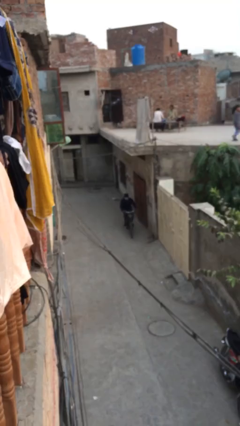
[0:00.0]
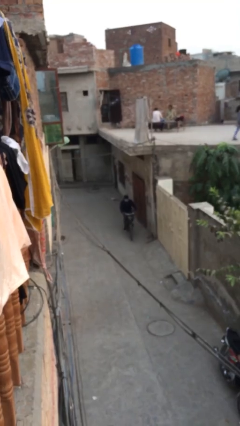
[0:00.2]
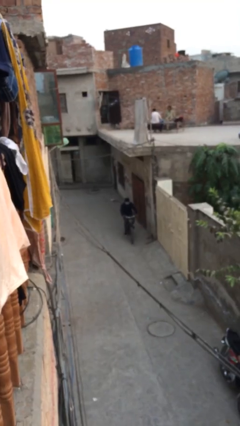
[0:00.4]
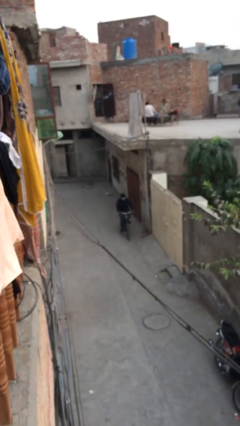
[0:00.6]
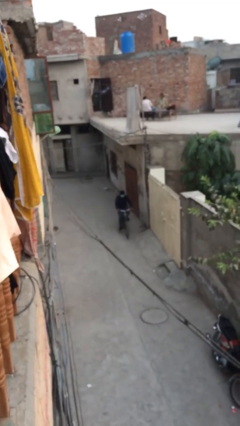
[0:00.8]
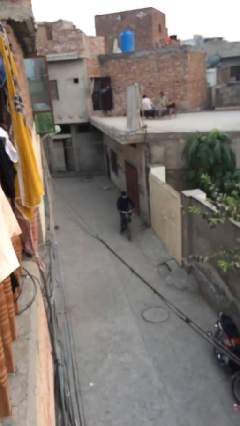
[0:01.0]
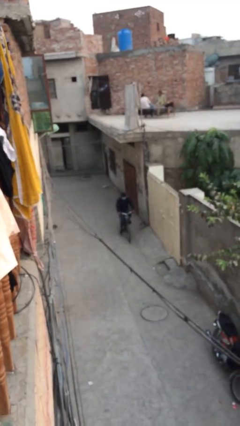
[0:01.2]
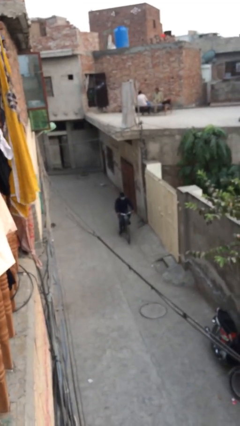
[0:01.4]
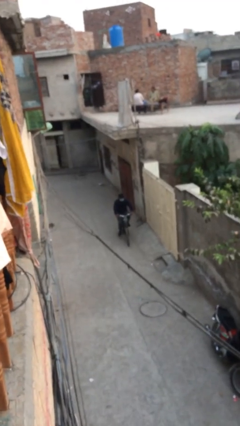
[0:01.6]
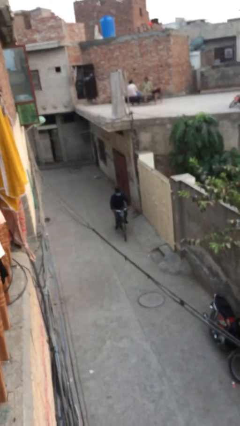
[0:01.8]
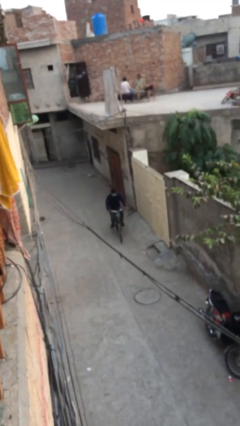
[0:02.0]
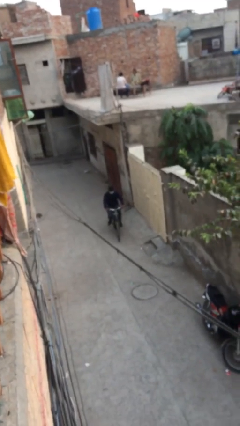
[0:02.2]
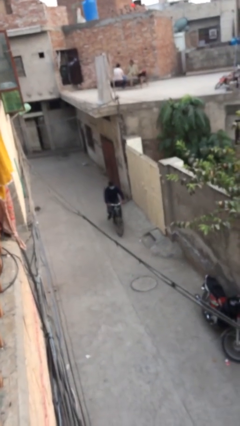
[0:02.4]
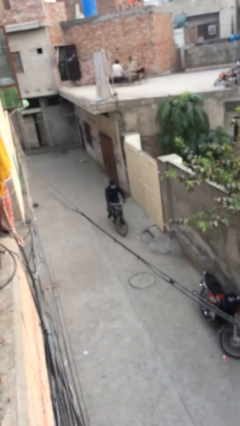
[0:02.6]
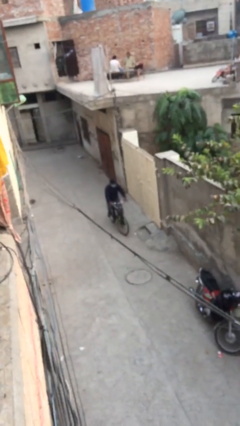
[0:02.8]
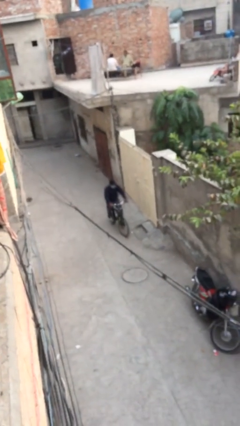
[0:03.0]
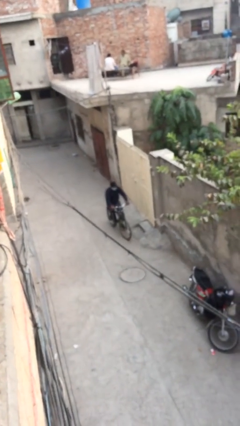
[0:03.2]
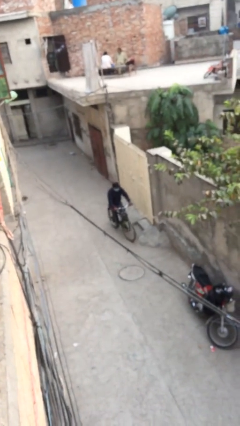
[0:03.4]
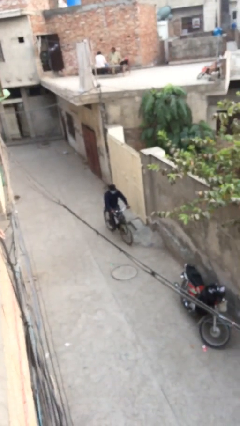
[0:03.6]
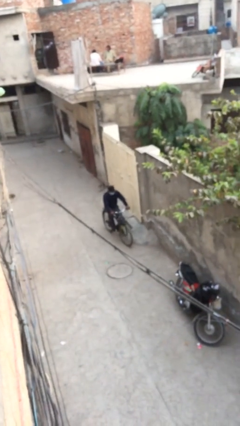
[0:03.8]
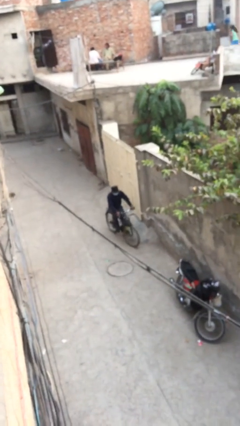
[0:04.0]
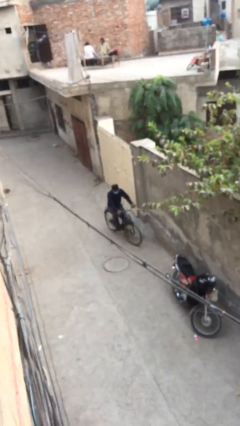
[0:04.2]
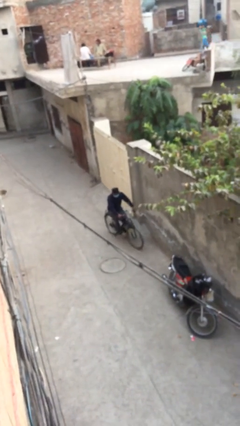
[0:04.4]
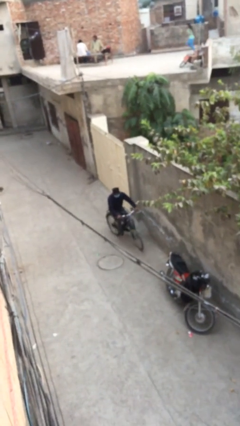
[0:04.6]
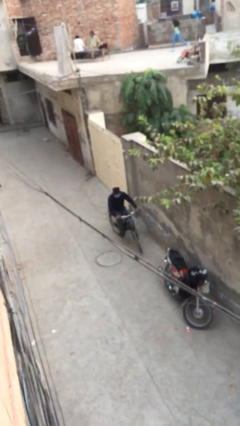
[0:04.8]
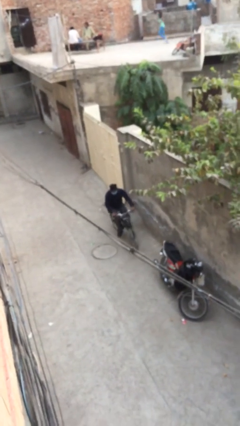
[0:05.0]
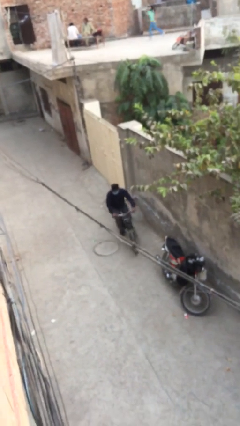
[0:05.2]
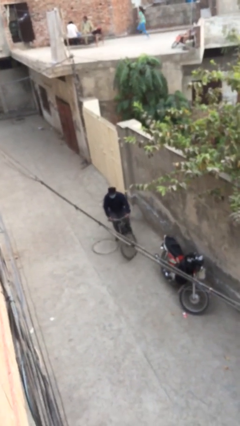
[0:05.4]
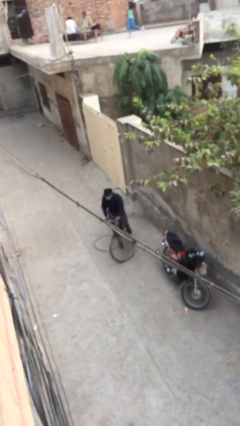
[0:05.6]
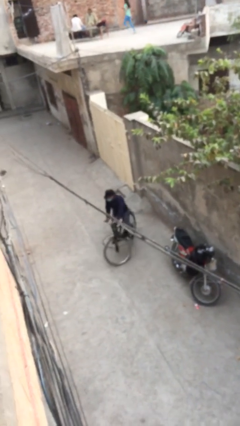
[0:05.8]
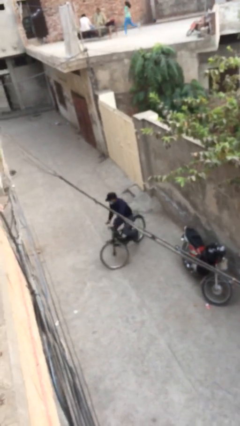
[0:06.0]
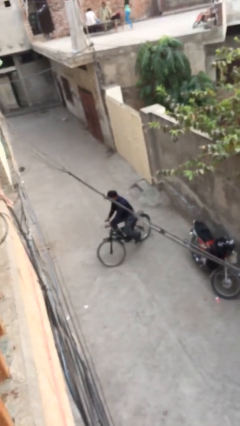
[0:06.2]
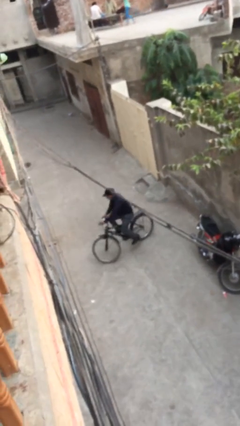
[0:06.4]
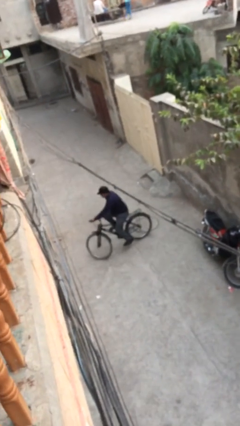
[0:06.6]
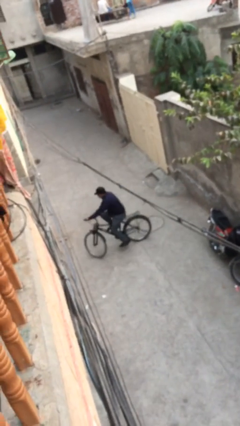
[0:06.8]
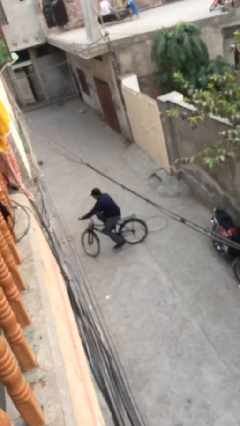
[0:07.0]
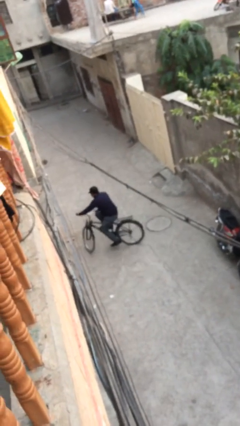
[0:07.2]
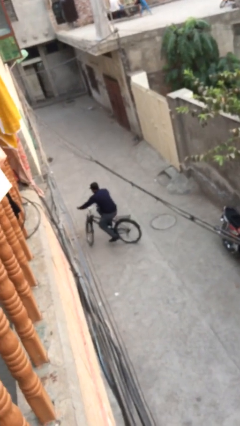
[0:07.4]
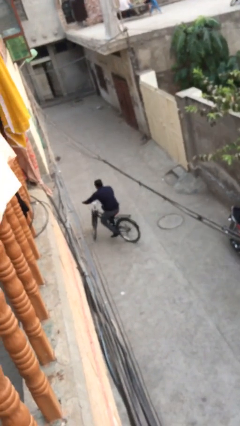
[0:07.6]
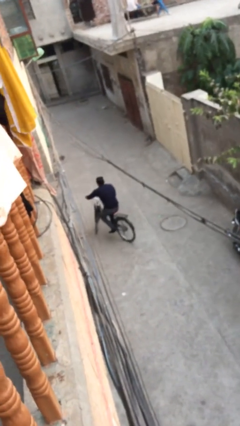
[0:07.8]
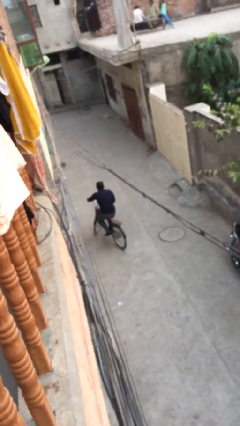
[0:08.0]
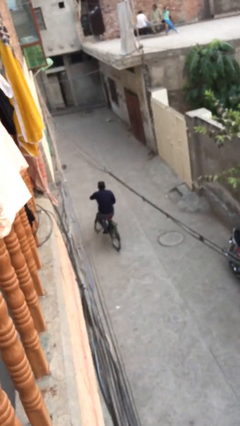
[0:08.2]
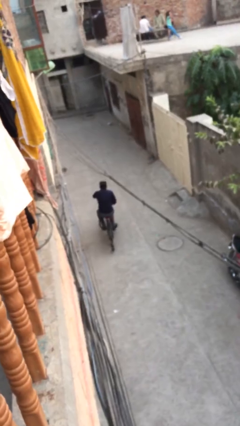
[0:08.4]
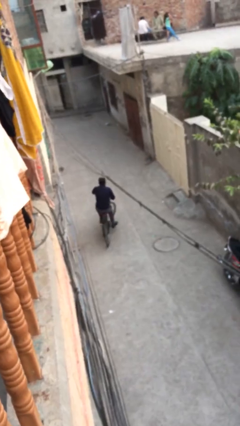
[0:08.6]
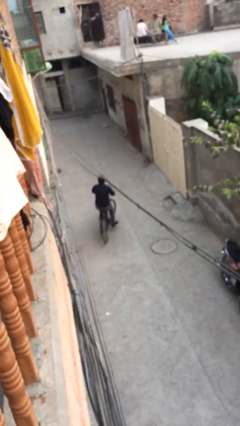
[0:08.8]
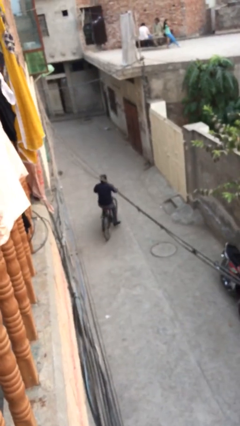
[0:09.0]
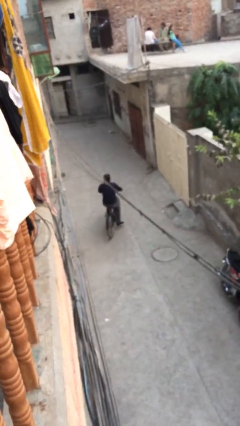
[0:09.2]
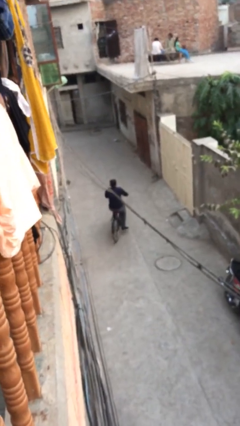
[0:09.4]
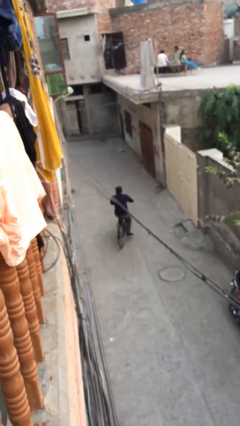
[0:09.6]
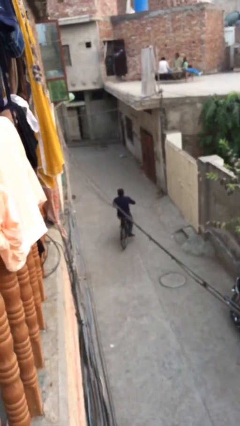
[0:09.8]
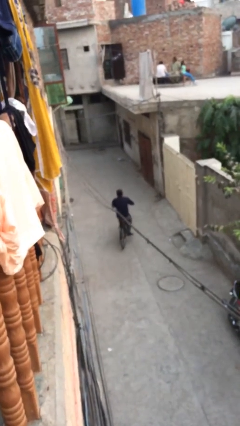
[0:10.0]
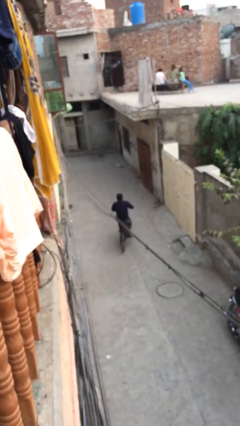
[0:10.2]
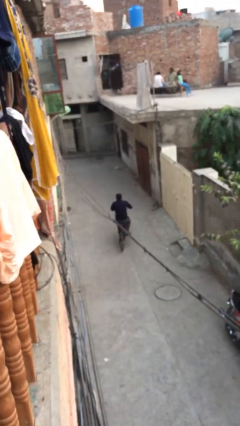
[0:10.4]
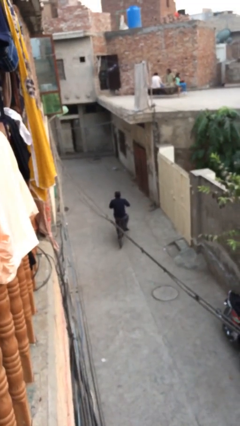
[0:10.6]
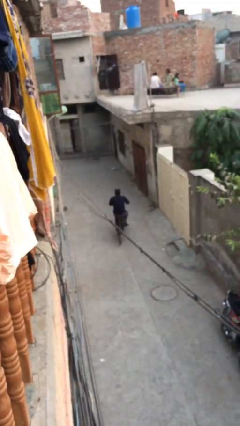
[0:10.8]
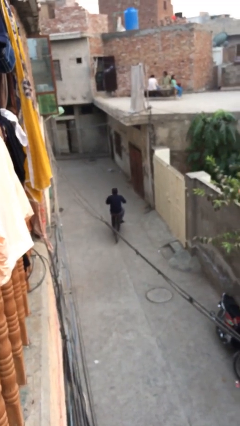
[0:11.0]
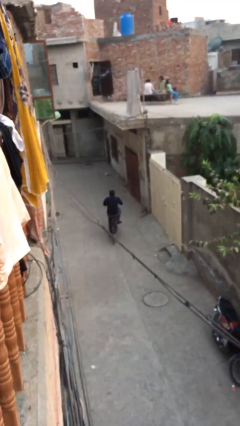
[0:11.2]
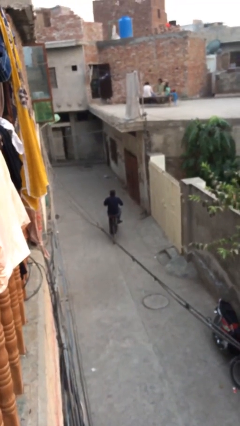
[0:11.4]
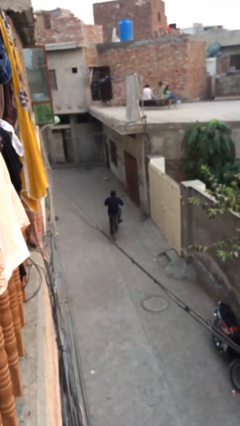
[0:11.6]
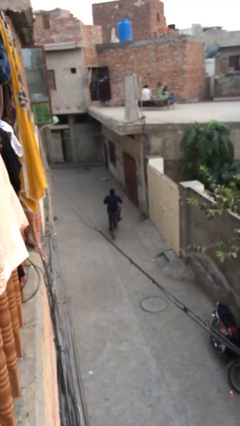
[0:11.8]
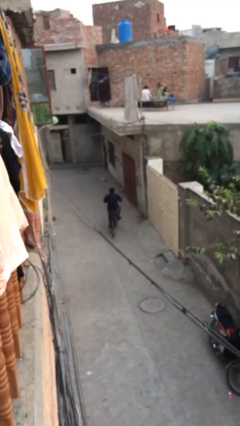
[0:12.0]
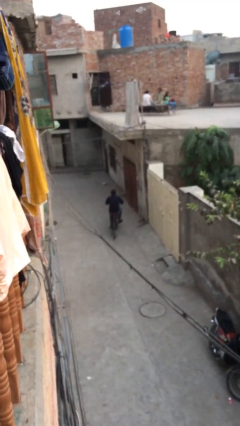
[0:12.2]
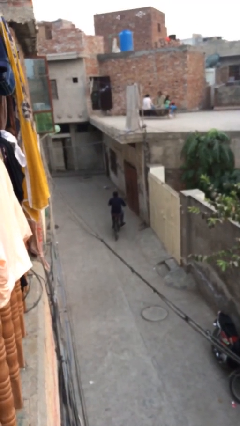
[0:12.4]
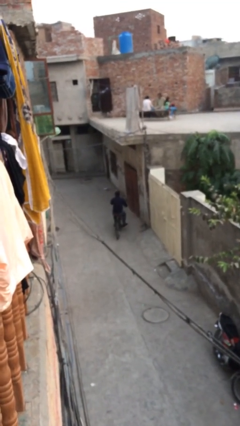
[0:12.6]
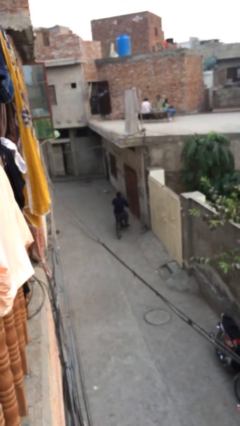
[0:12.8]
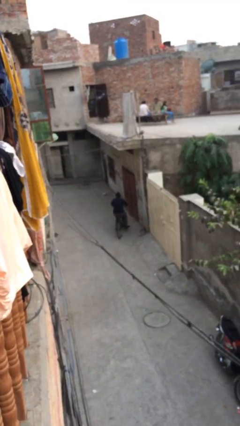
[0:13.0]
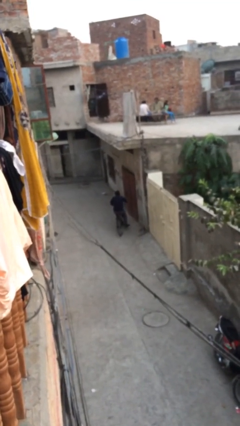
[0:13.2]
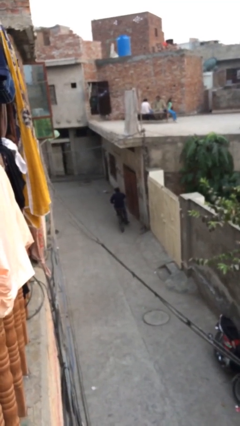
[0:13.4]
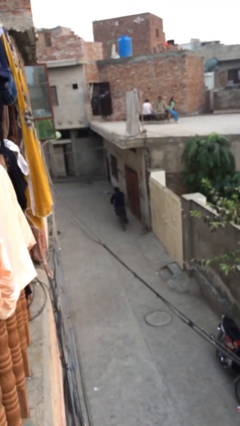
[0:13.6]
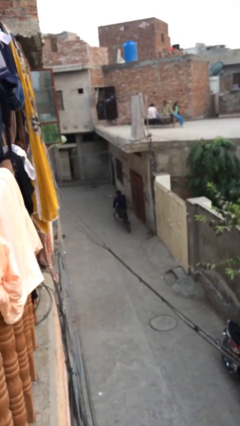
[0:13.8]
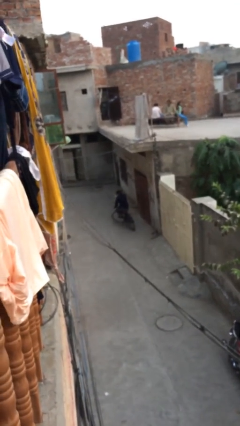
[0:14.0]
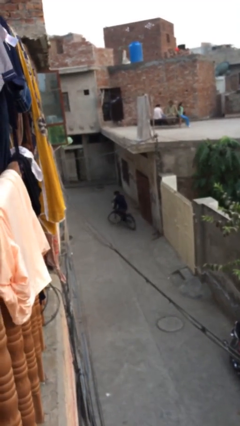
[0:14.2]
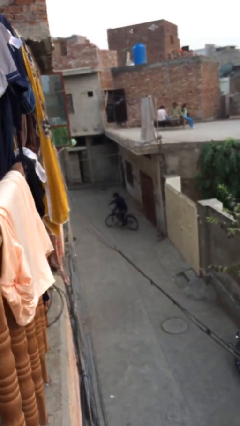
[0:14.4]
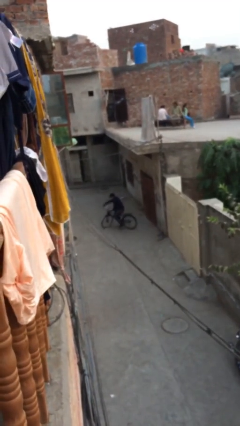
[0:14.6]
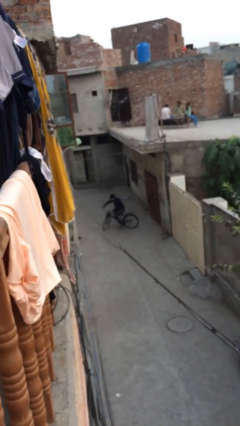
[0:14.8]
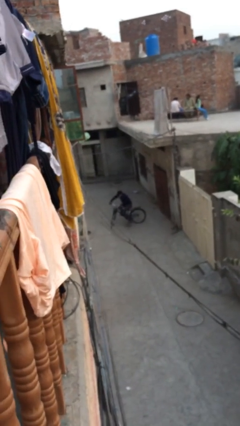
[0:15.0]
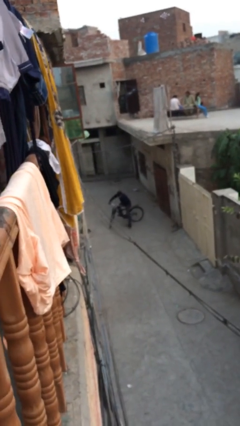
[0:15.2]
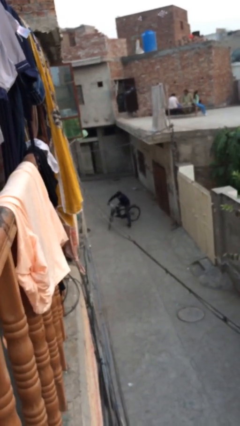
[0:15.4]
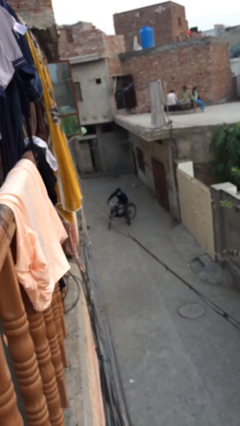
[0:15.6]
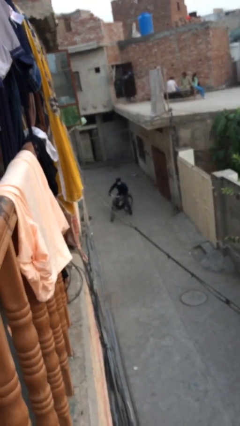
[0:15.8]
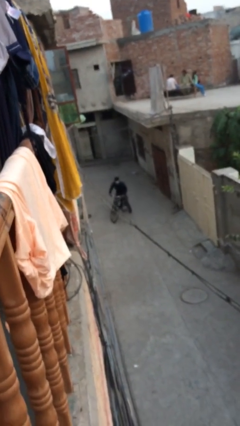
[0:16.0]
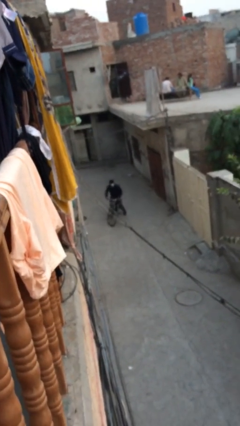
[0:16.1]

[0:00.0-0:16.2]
person rides bicycle

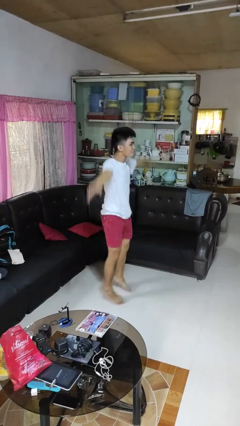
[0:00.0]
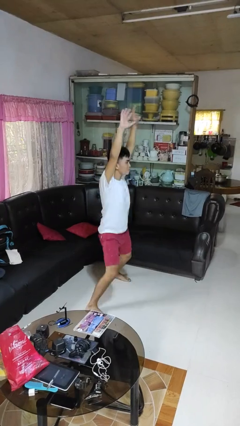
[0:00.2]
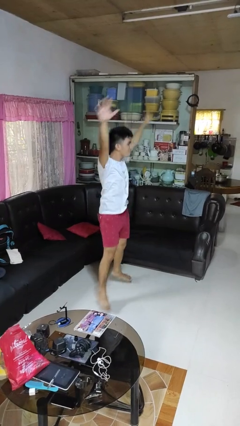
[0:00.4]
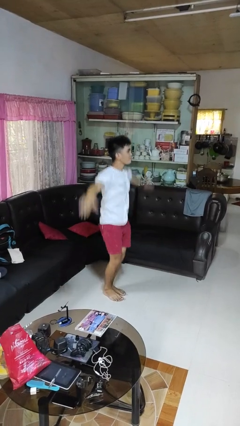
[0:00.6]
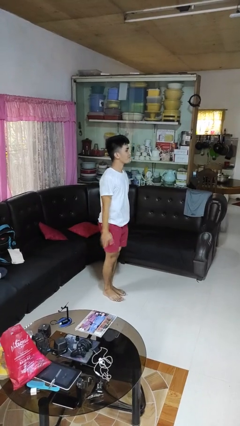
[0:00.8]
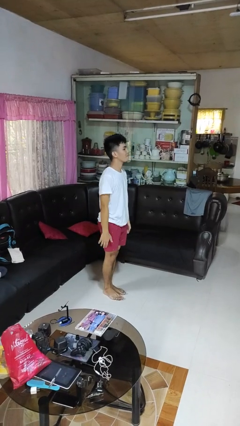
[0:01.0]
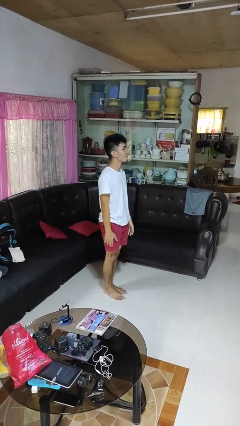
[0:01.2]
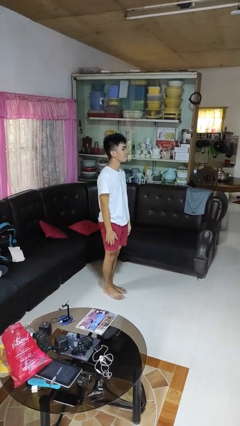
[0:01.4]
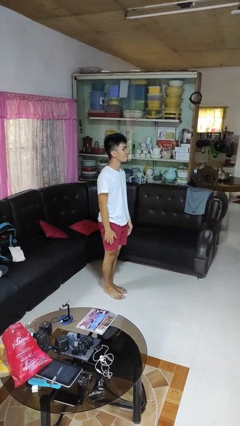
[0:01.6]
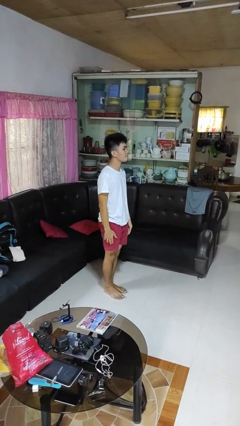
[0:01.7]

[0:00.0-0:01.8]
person exercises with jumping jacks

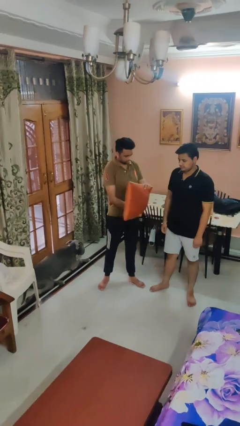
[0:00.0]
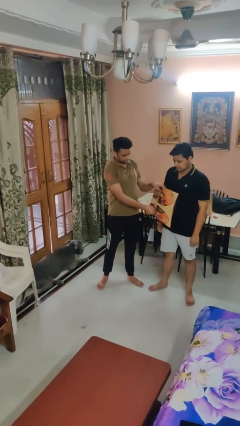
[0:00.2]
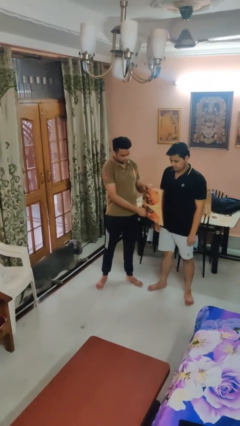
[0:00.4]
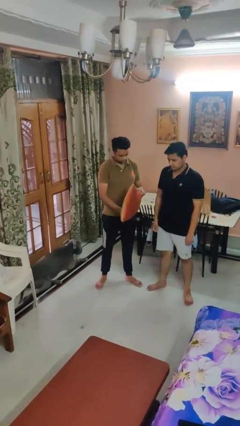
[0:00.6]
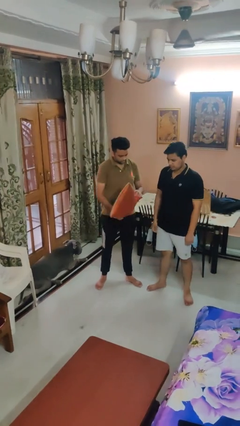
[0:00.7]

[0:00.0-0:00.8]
person hits person with pillow
